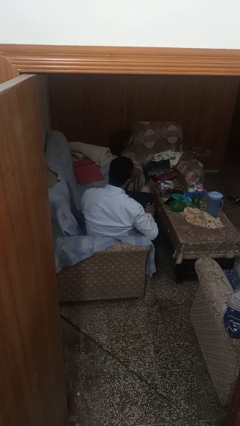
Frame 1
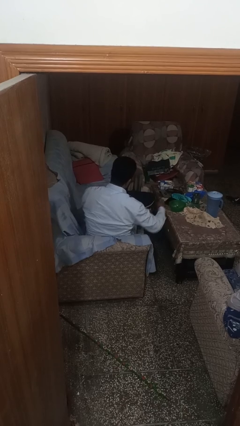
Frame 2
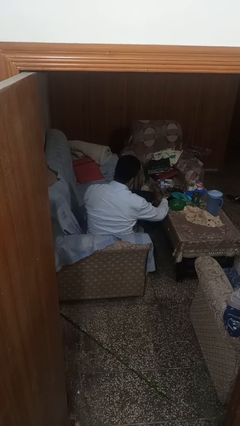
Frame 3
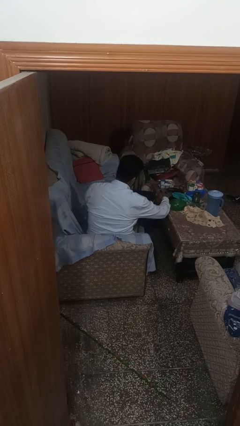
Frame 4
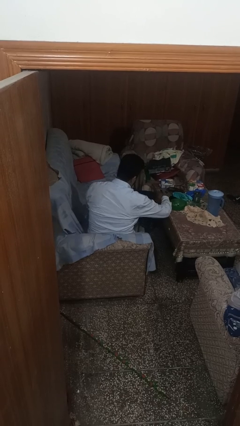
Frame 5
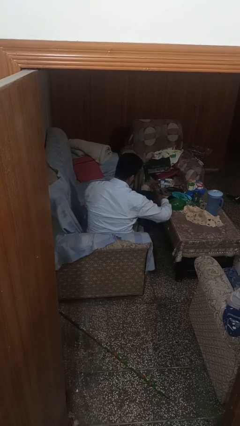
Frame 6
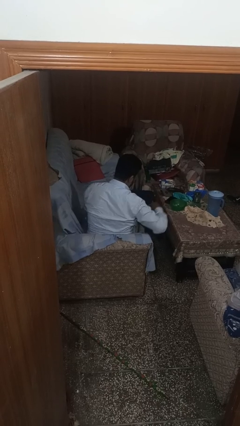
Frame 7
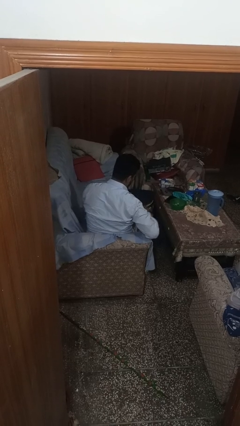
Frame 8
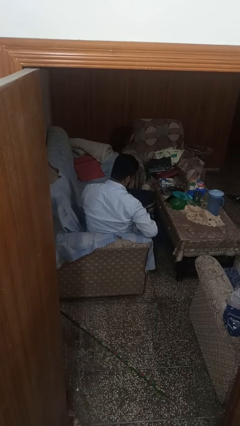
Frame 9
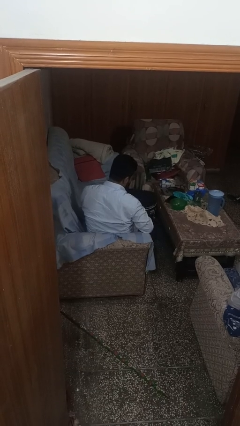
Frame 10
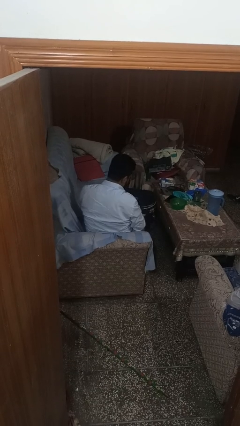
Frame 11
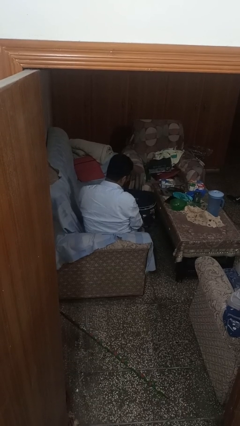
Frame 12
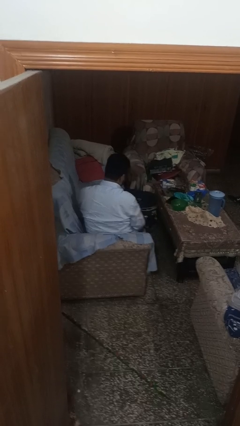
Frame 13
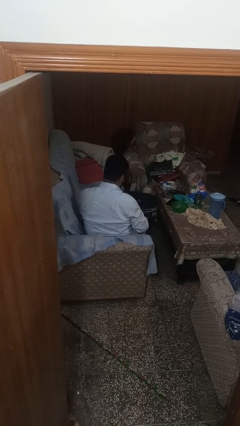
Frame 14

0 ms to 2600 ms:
person opens suitcase

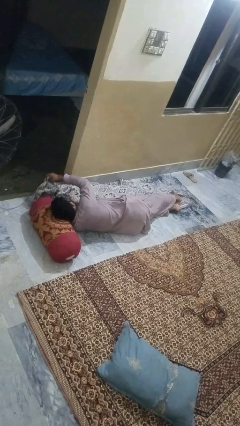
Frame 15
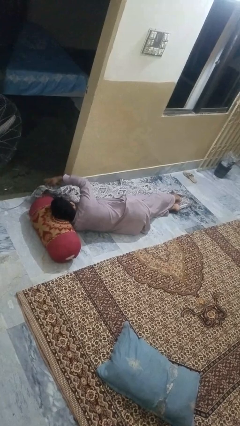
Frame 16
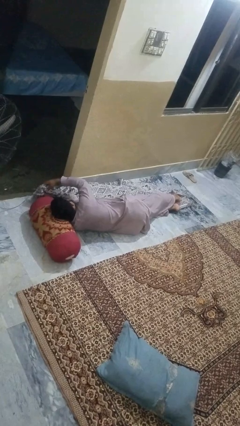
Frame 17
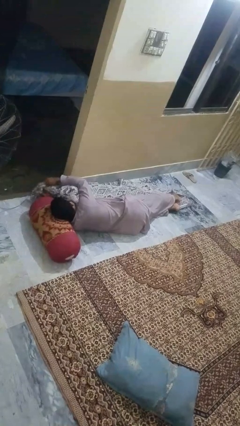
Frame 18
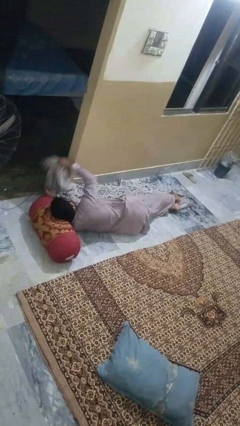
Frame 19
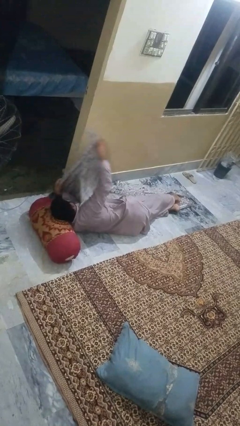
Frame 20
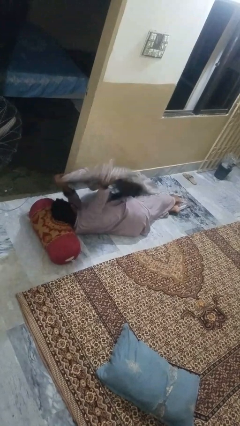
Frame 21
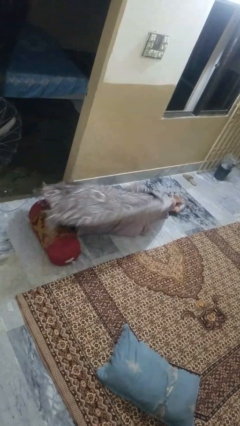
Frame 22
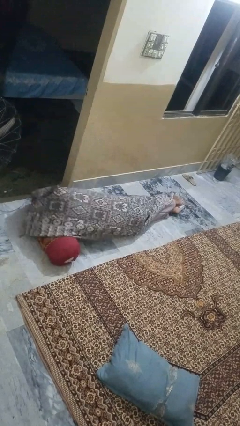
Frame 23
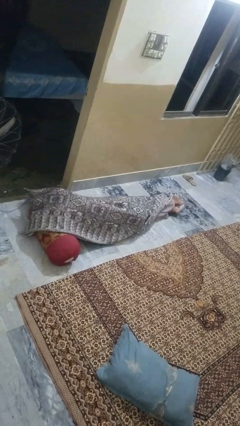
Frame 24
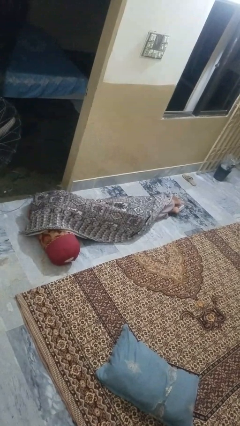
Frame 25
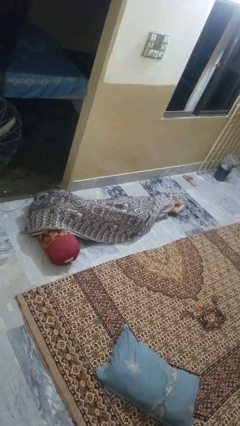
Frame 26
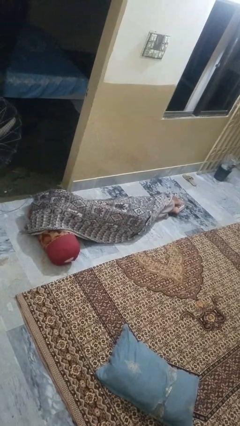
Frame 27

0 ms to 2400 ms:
person covers with blanket

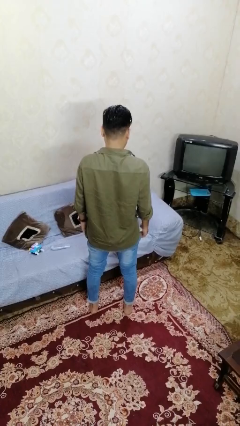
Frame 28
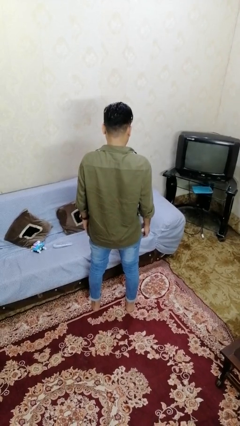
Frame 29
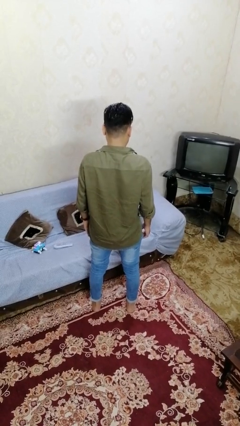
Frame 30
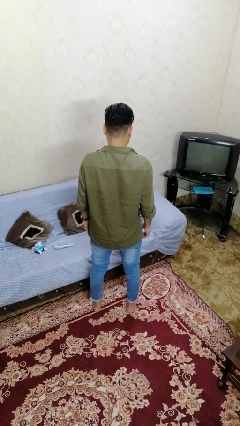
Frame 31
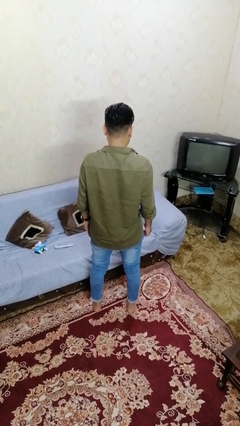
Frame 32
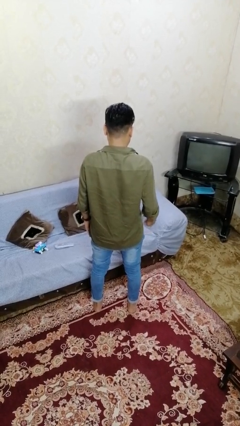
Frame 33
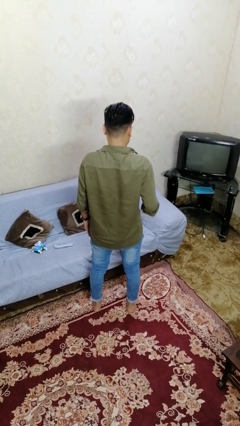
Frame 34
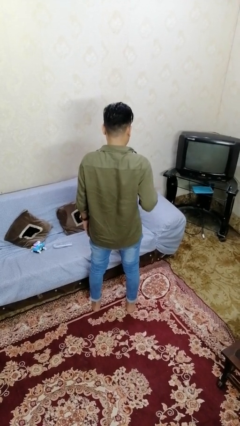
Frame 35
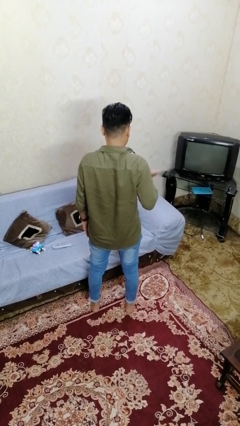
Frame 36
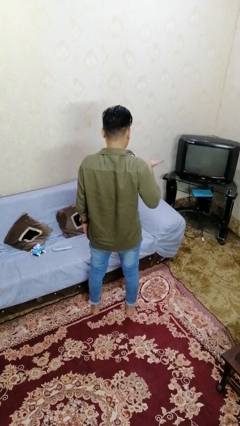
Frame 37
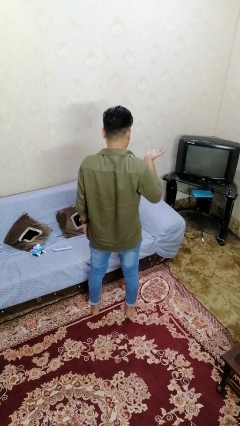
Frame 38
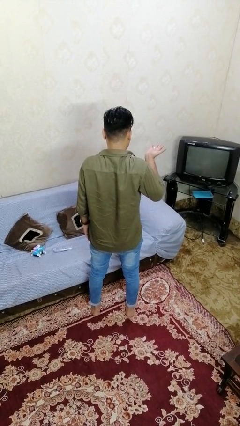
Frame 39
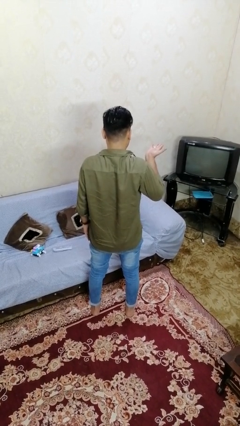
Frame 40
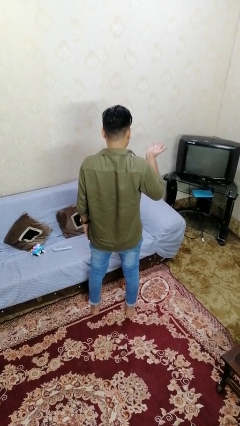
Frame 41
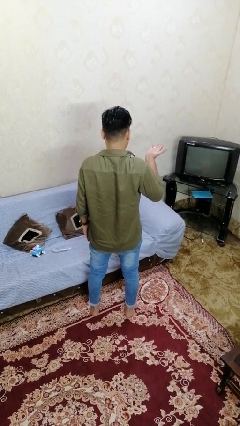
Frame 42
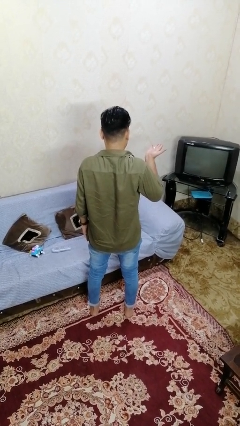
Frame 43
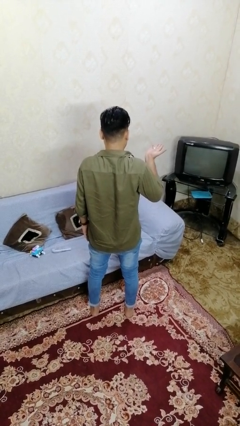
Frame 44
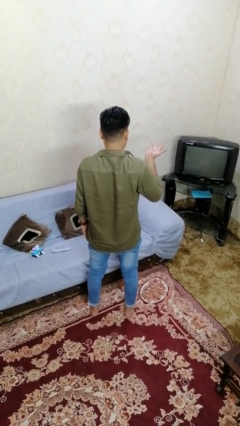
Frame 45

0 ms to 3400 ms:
person gestures swipe up

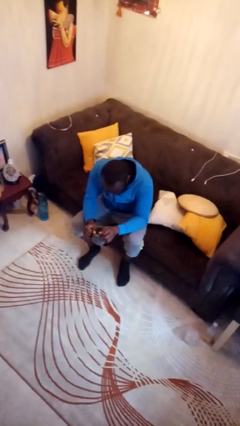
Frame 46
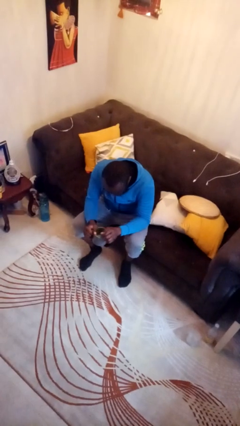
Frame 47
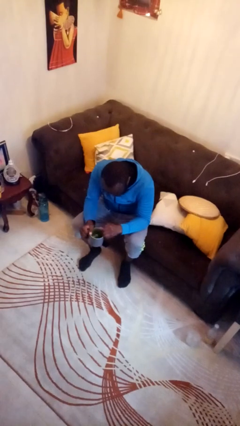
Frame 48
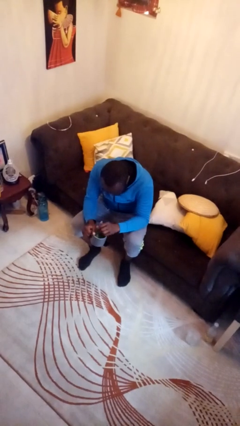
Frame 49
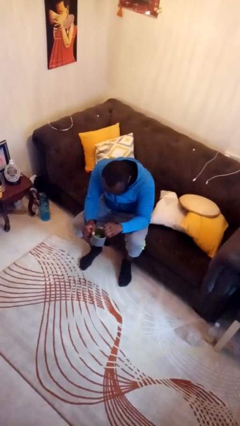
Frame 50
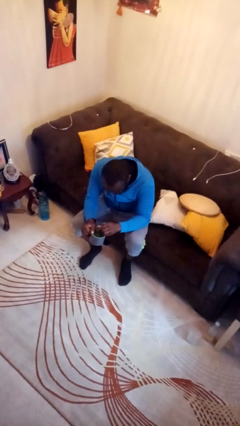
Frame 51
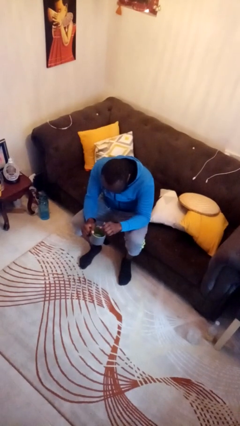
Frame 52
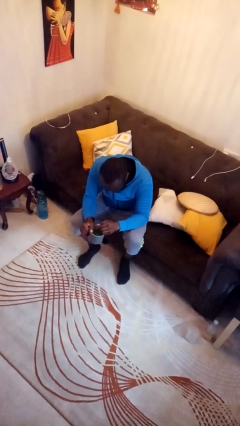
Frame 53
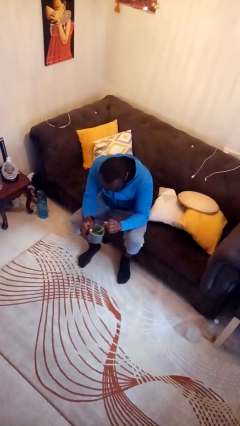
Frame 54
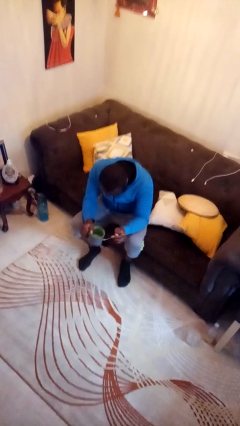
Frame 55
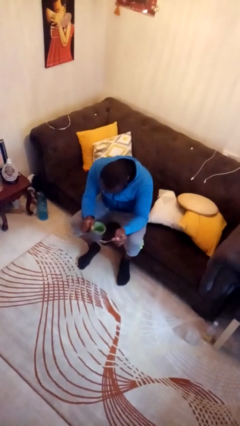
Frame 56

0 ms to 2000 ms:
person stirs mug

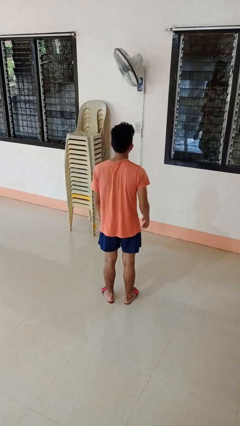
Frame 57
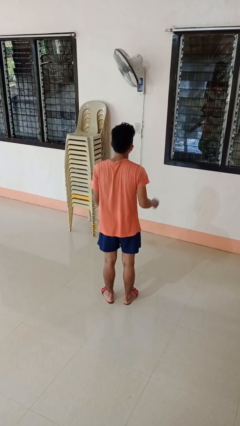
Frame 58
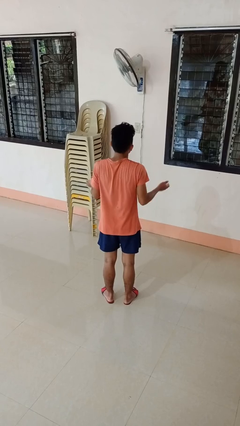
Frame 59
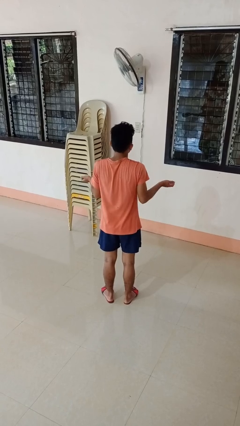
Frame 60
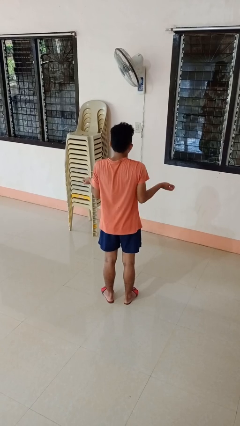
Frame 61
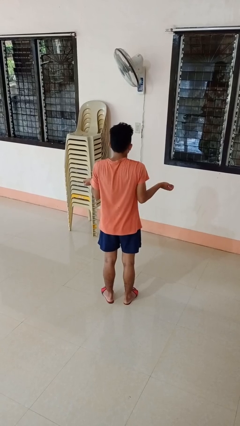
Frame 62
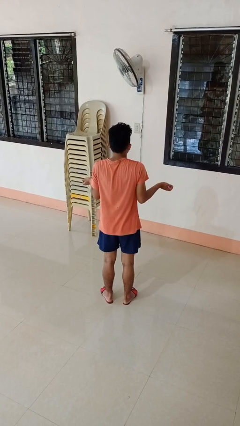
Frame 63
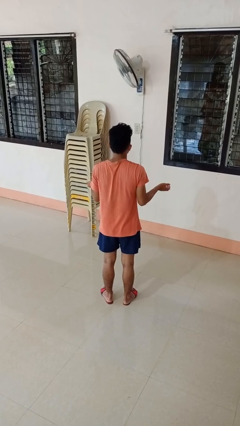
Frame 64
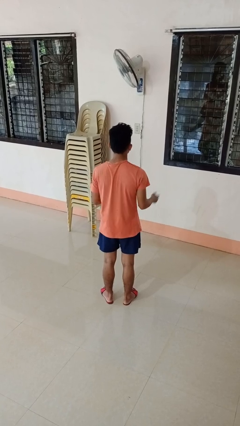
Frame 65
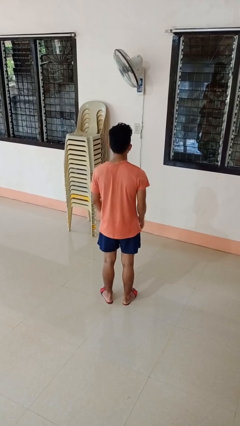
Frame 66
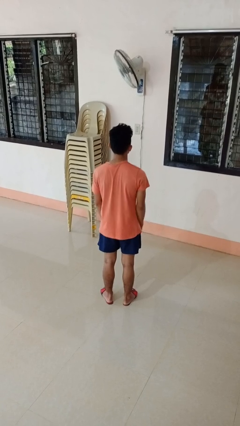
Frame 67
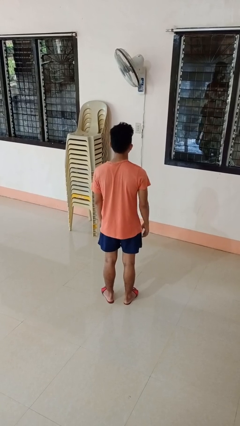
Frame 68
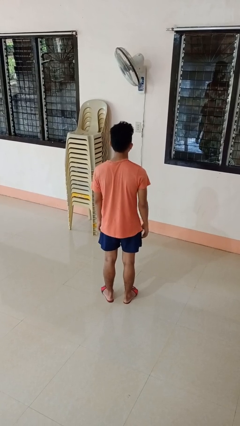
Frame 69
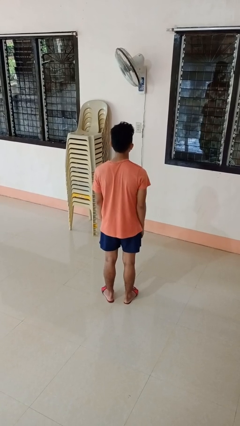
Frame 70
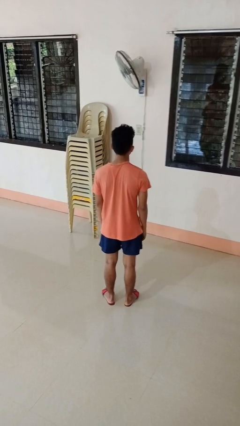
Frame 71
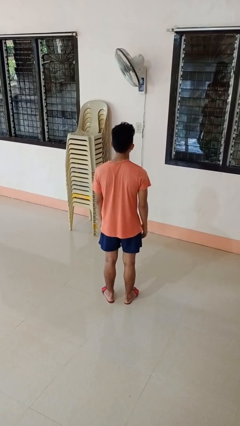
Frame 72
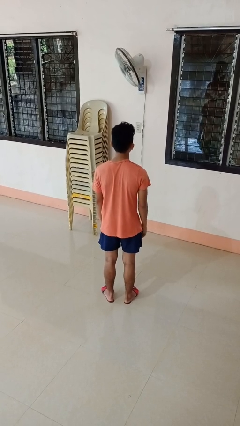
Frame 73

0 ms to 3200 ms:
person shrugs

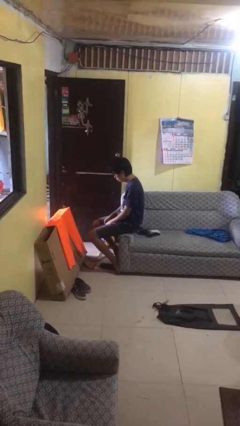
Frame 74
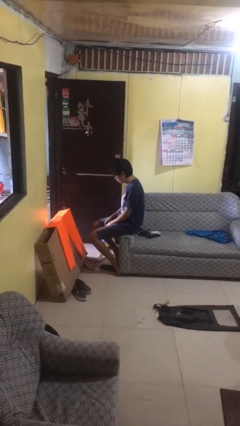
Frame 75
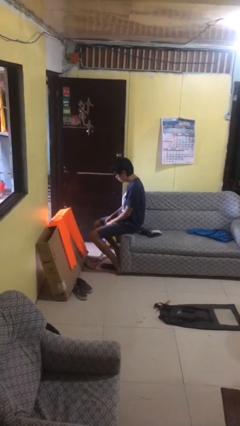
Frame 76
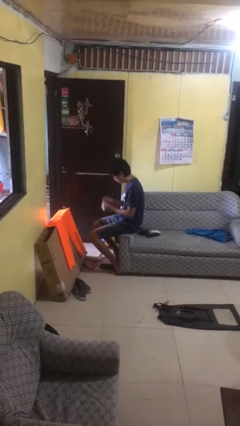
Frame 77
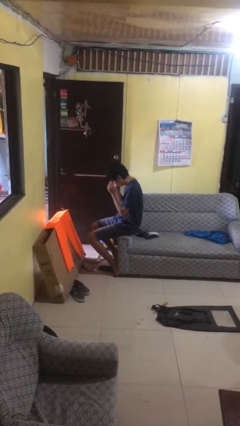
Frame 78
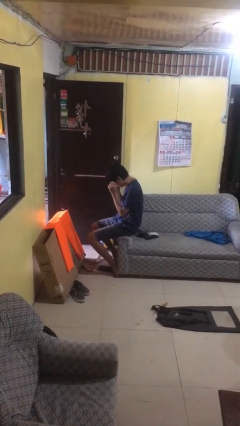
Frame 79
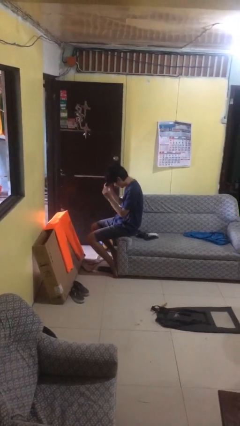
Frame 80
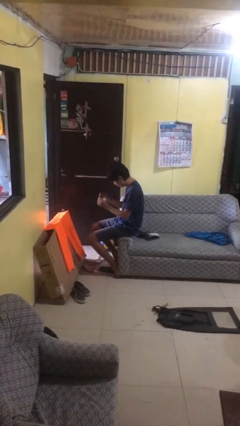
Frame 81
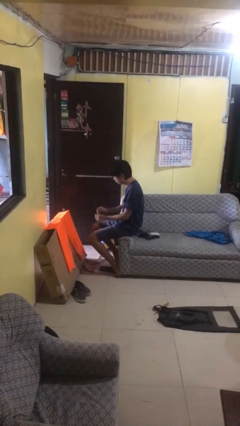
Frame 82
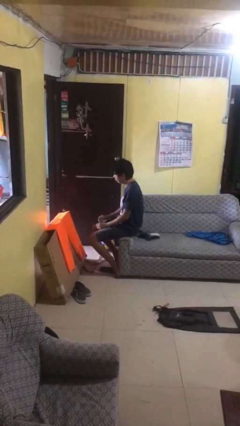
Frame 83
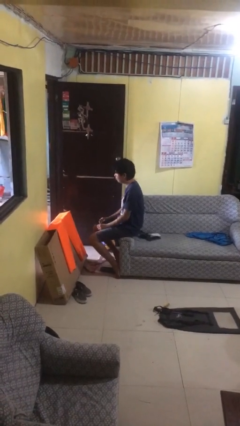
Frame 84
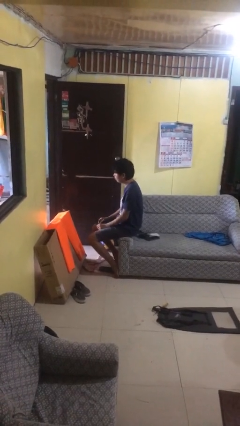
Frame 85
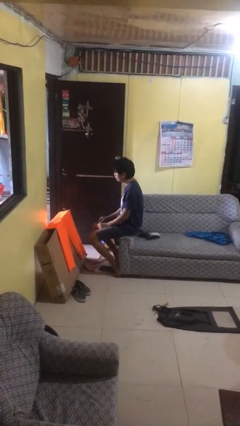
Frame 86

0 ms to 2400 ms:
person takes off glasses

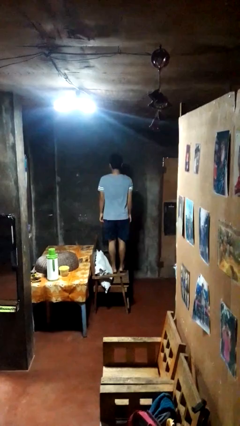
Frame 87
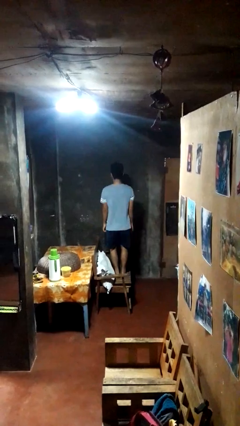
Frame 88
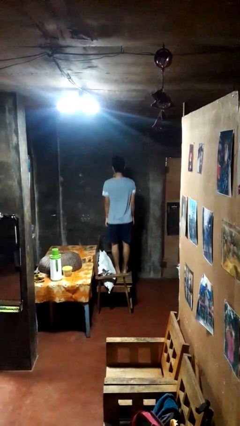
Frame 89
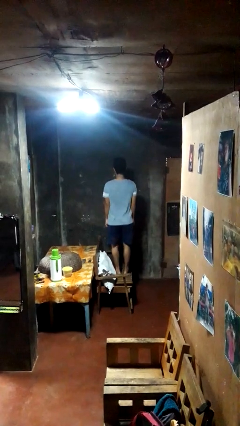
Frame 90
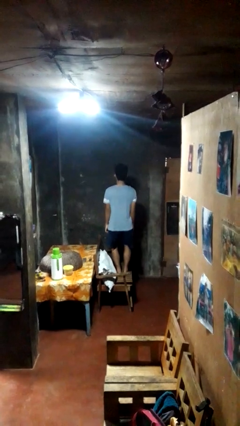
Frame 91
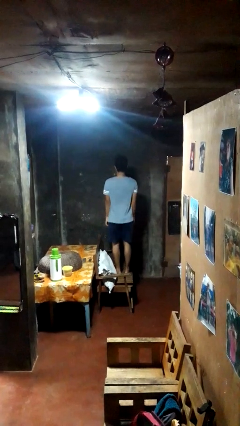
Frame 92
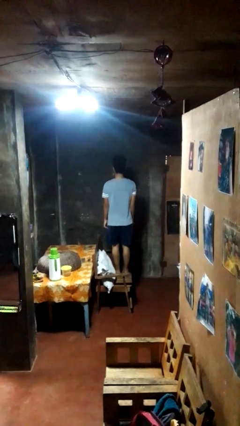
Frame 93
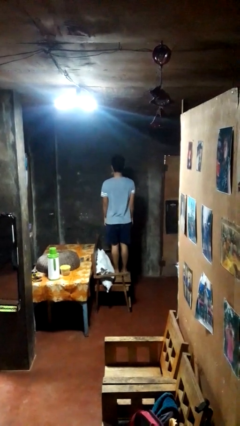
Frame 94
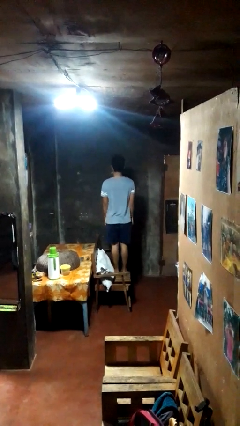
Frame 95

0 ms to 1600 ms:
person jumps on couch
